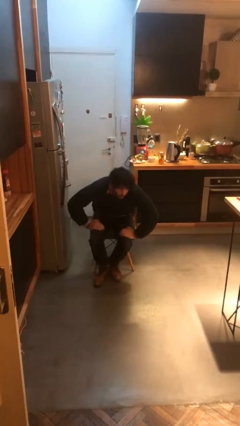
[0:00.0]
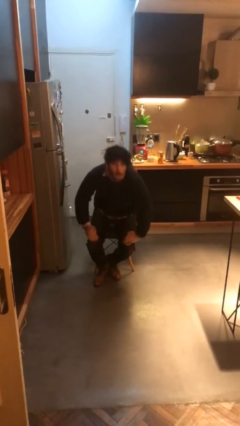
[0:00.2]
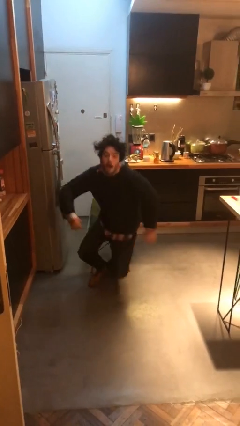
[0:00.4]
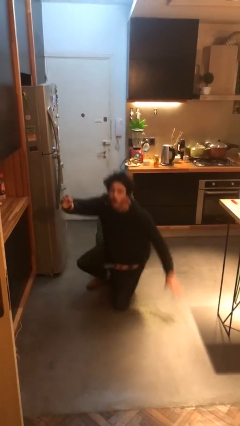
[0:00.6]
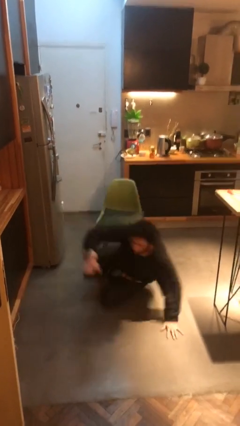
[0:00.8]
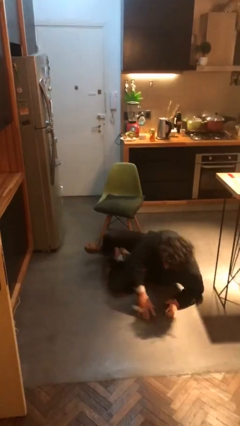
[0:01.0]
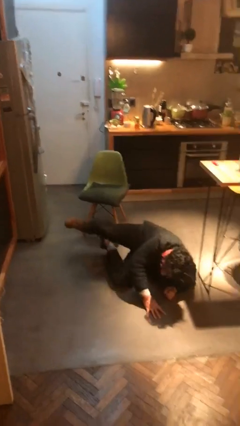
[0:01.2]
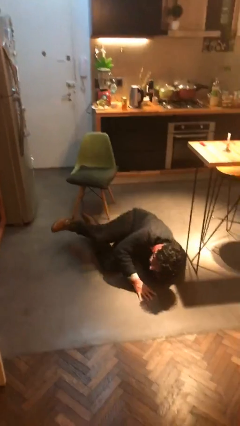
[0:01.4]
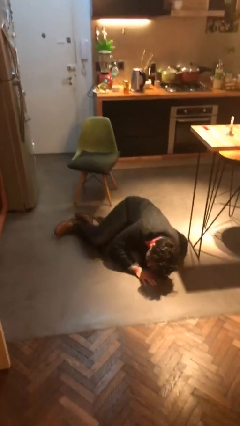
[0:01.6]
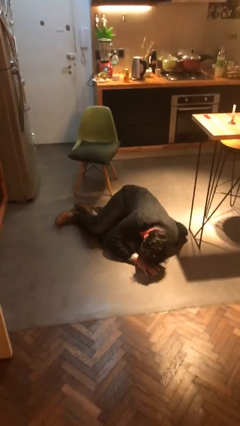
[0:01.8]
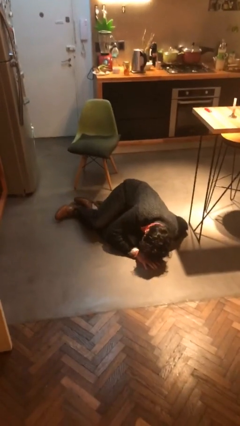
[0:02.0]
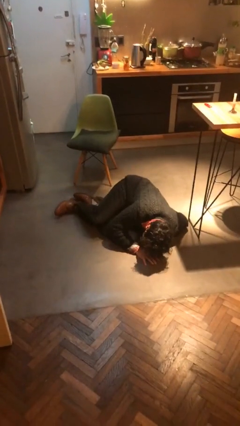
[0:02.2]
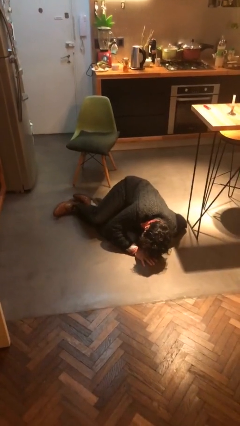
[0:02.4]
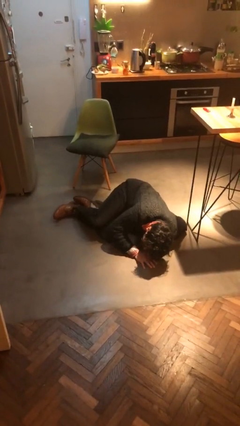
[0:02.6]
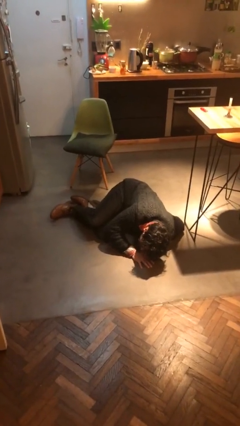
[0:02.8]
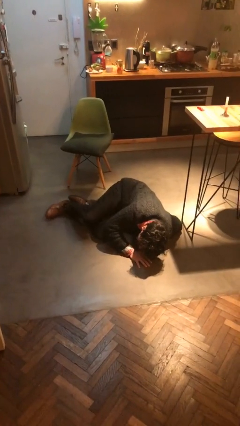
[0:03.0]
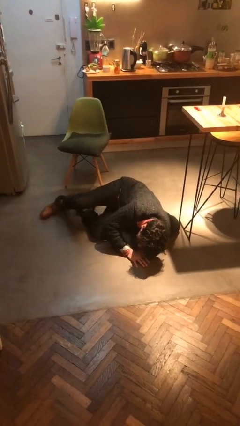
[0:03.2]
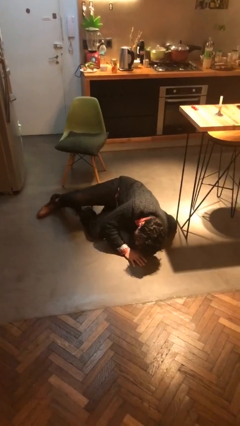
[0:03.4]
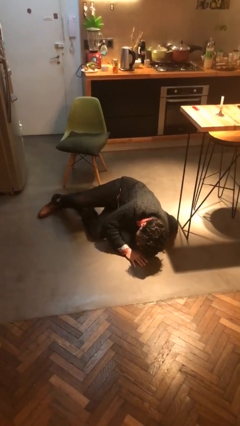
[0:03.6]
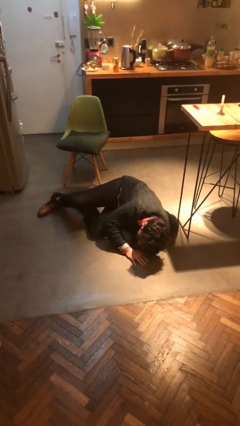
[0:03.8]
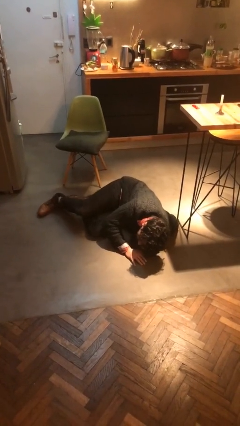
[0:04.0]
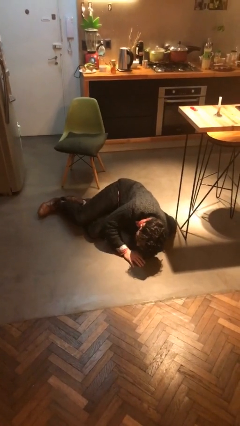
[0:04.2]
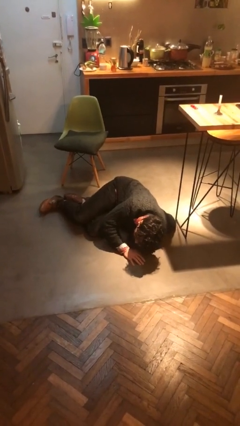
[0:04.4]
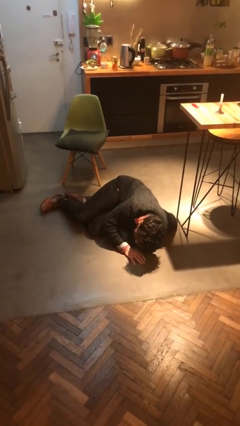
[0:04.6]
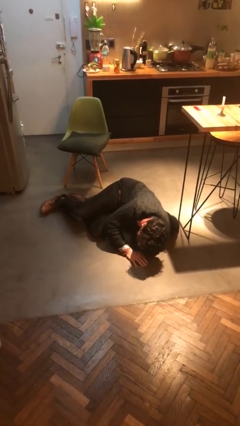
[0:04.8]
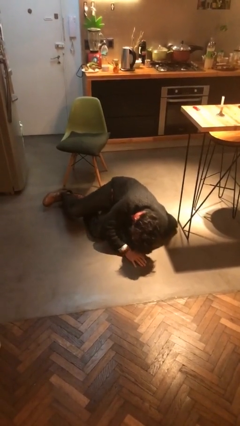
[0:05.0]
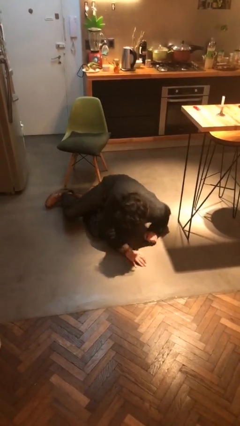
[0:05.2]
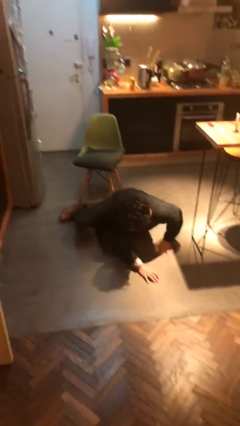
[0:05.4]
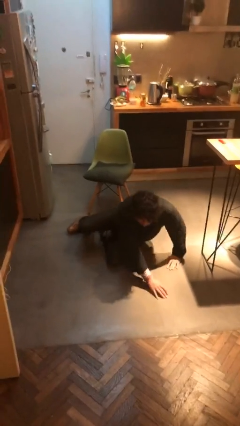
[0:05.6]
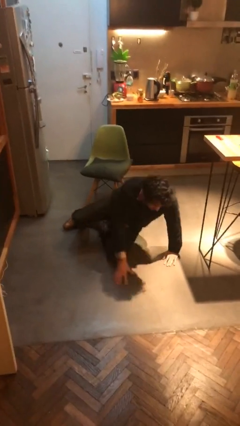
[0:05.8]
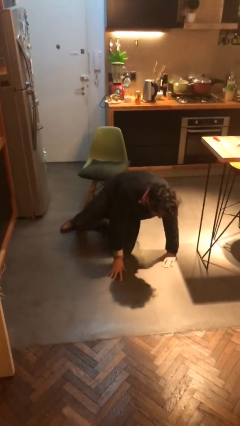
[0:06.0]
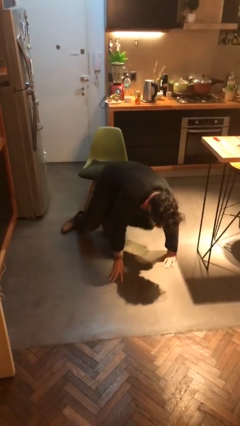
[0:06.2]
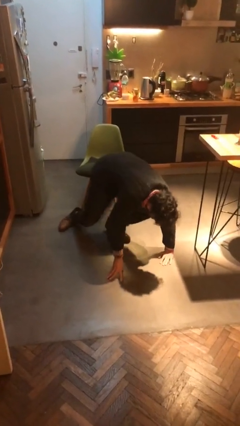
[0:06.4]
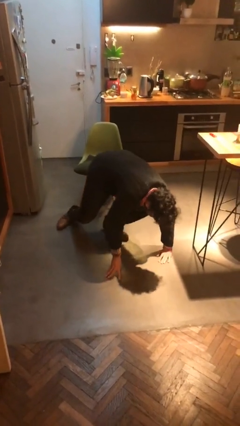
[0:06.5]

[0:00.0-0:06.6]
person falls from chair

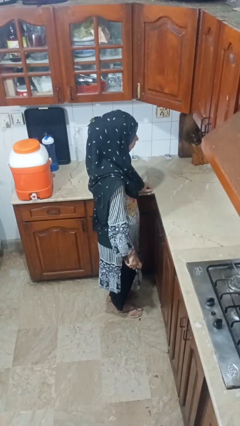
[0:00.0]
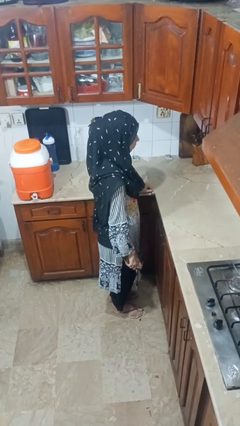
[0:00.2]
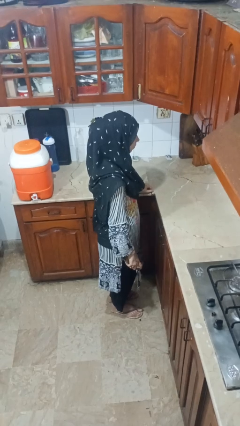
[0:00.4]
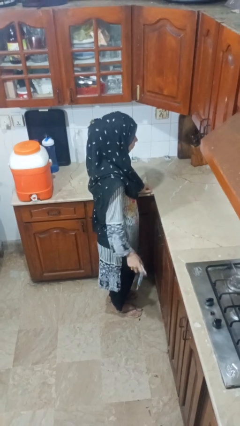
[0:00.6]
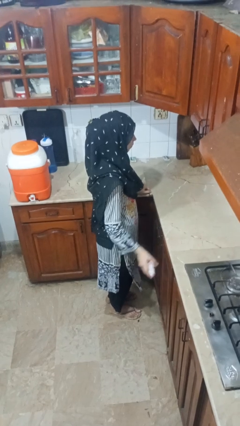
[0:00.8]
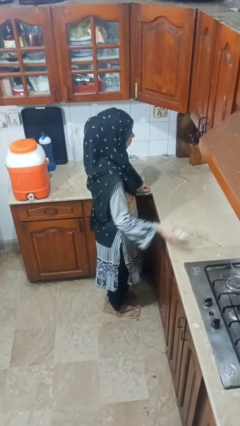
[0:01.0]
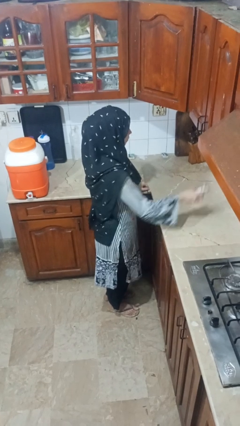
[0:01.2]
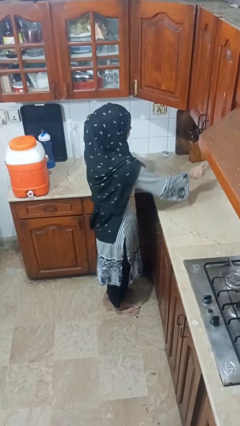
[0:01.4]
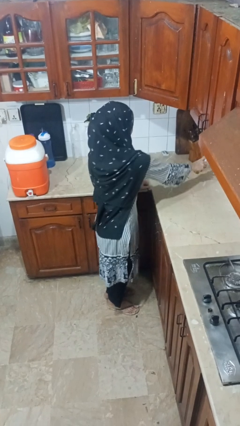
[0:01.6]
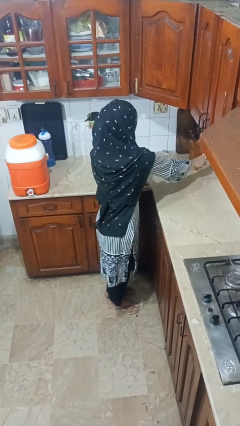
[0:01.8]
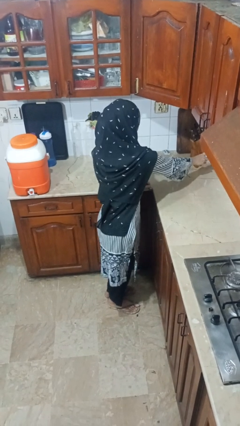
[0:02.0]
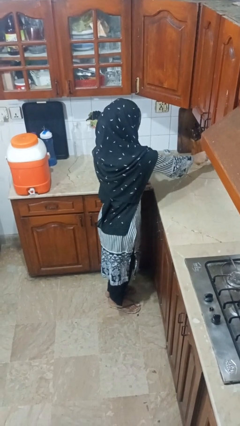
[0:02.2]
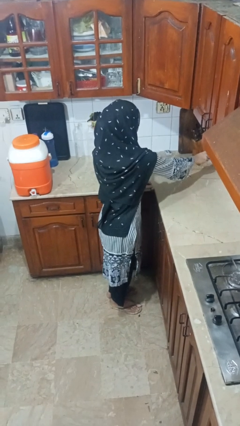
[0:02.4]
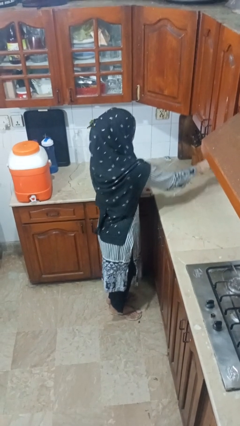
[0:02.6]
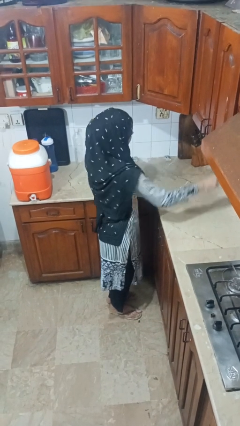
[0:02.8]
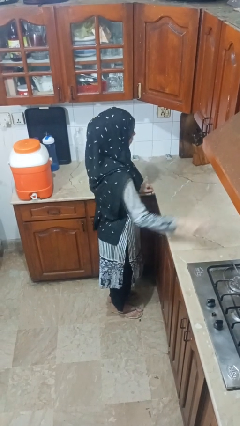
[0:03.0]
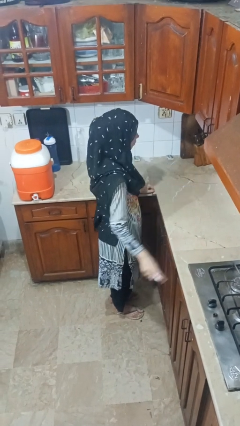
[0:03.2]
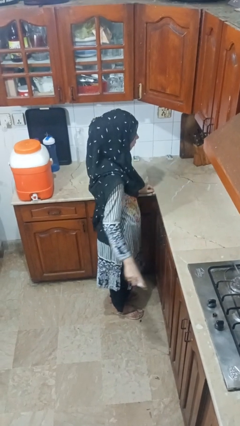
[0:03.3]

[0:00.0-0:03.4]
person sprays from bottle

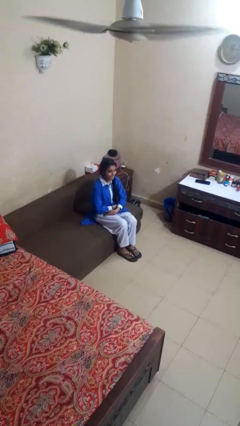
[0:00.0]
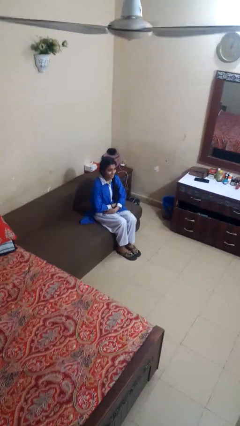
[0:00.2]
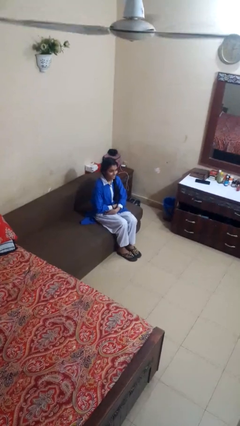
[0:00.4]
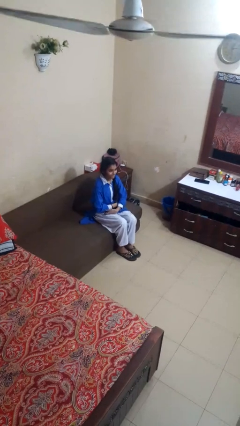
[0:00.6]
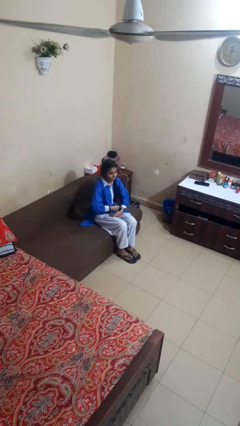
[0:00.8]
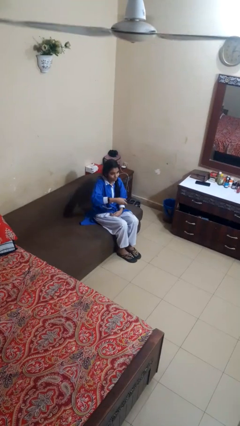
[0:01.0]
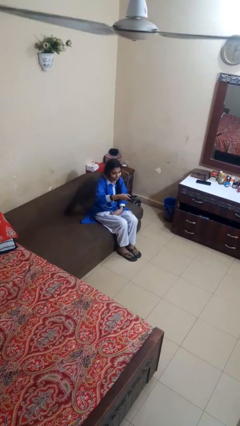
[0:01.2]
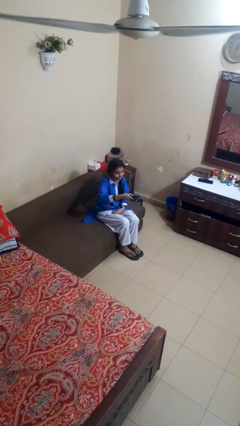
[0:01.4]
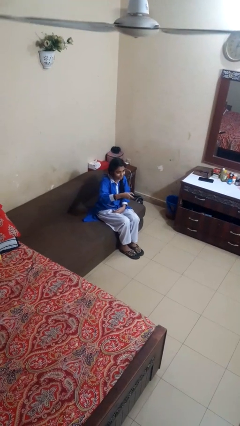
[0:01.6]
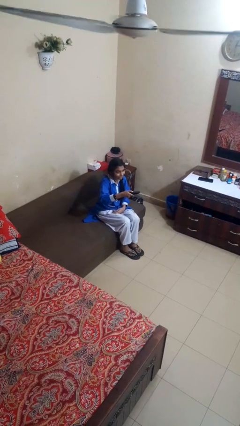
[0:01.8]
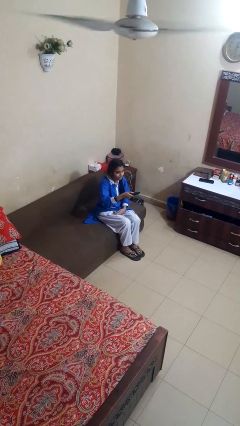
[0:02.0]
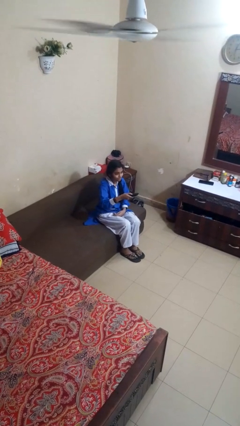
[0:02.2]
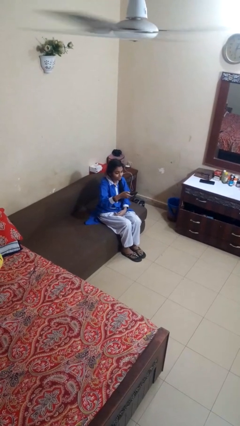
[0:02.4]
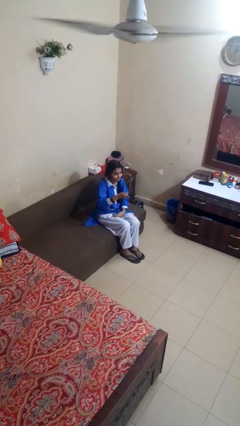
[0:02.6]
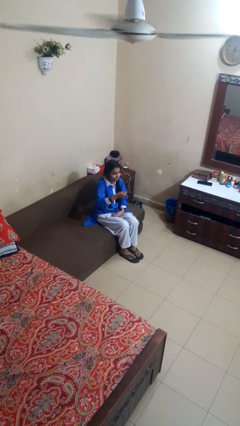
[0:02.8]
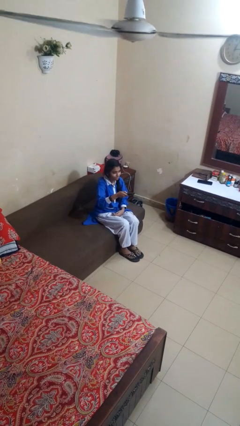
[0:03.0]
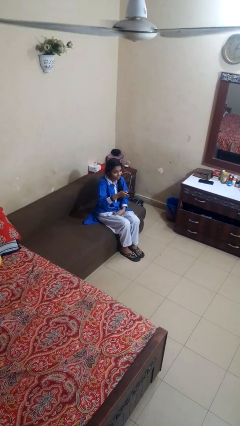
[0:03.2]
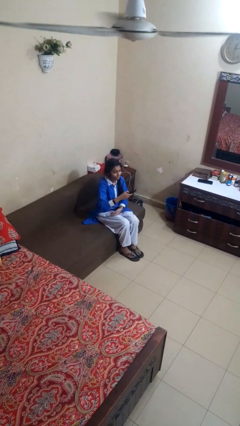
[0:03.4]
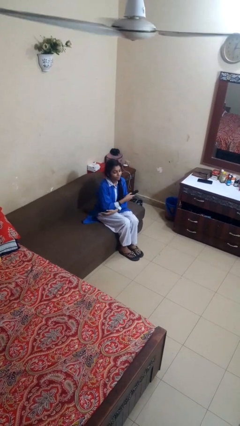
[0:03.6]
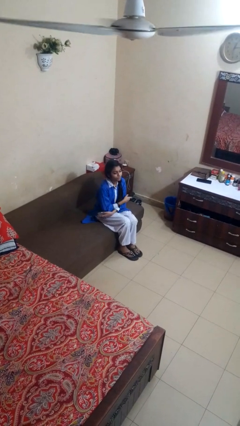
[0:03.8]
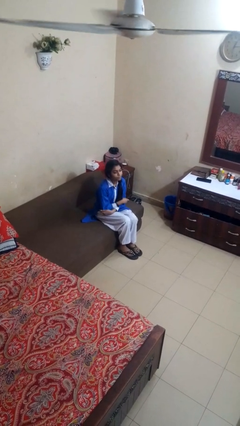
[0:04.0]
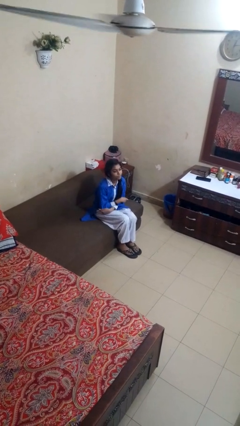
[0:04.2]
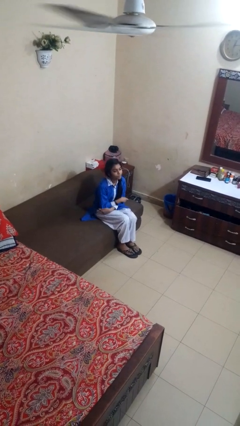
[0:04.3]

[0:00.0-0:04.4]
person uses television remote

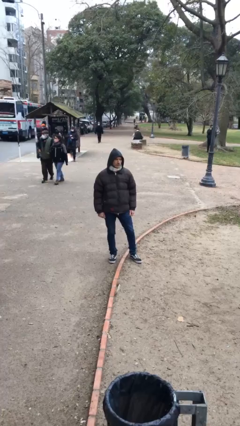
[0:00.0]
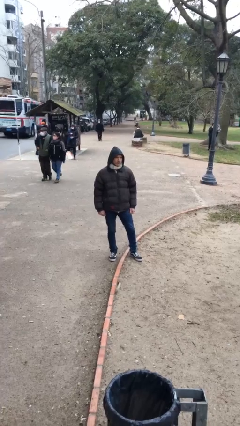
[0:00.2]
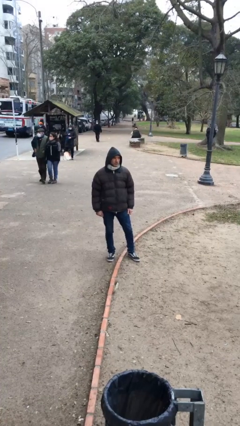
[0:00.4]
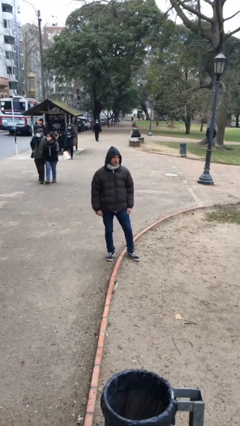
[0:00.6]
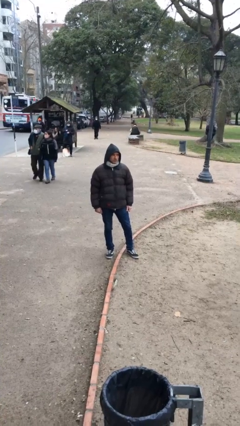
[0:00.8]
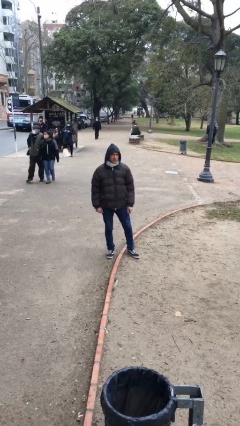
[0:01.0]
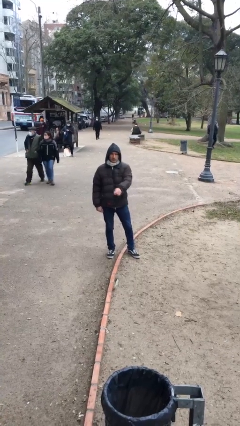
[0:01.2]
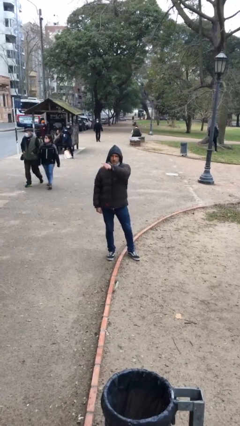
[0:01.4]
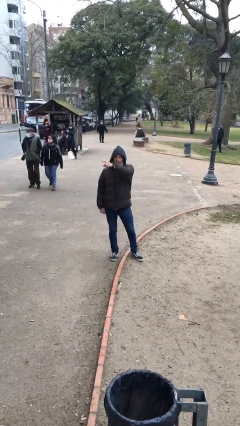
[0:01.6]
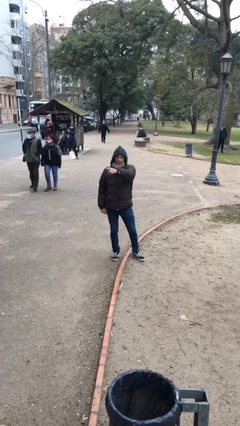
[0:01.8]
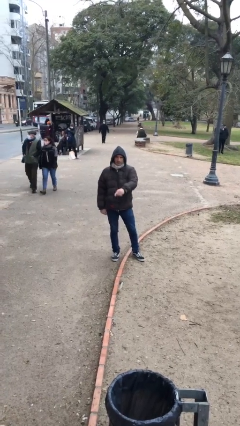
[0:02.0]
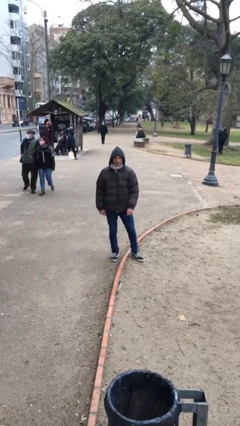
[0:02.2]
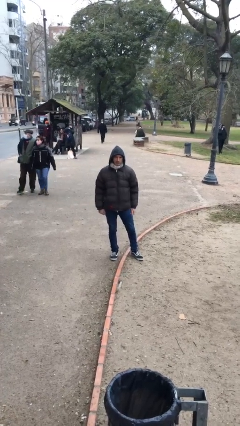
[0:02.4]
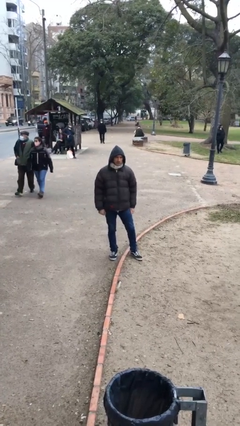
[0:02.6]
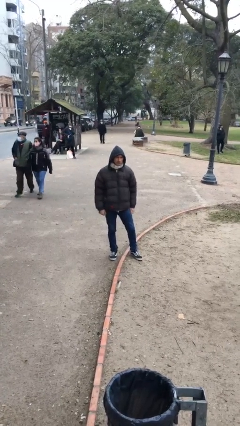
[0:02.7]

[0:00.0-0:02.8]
person points at person
